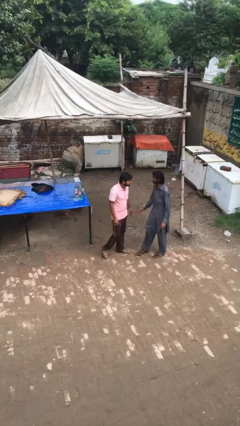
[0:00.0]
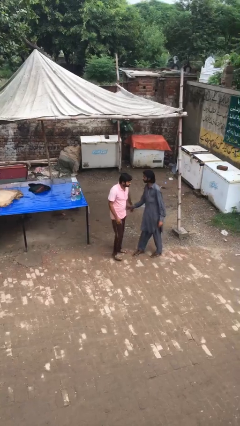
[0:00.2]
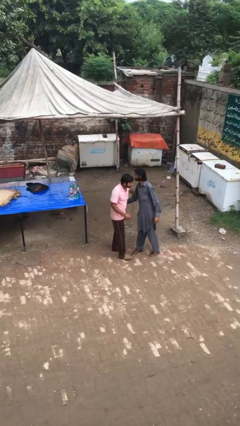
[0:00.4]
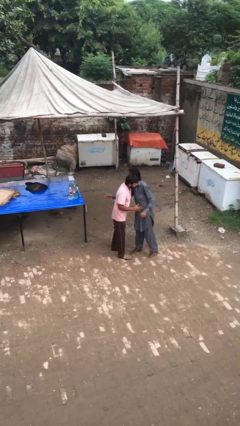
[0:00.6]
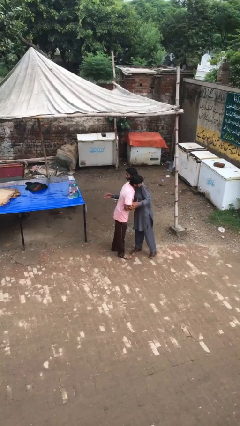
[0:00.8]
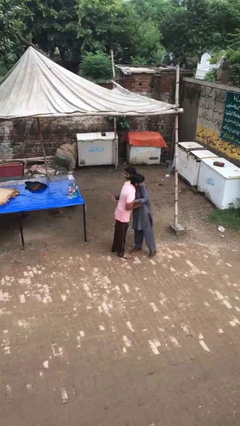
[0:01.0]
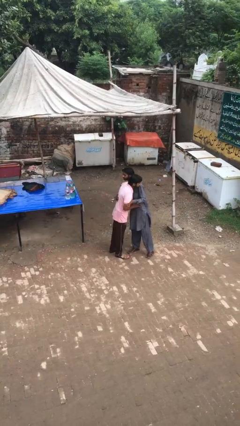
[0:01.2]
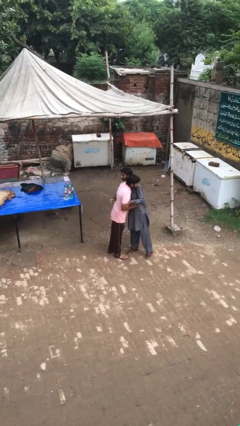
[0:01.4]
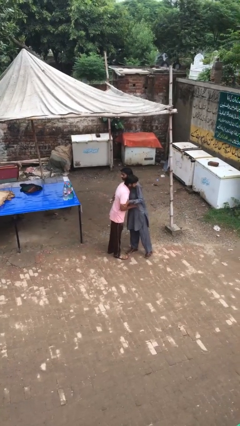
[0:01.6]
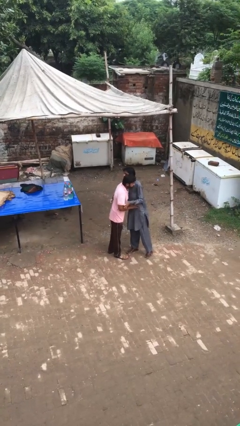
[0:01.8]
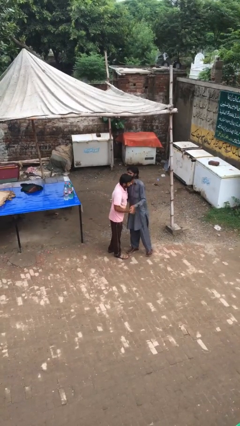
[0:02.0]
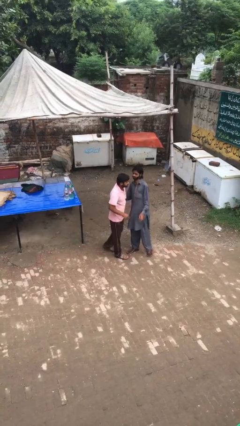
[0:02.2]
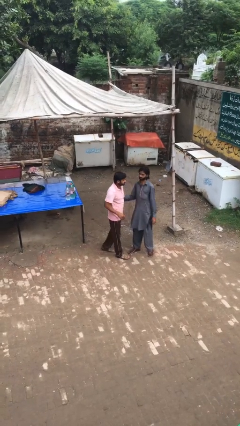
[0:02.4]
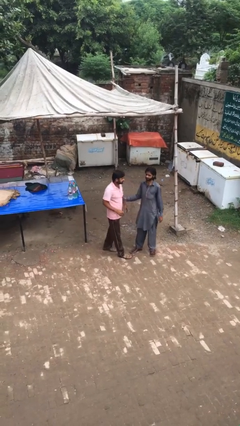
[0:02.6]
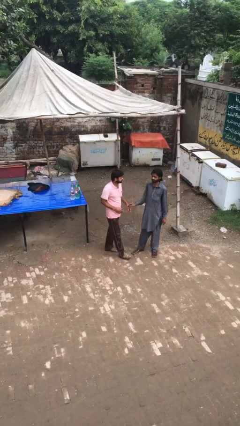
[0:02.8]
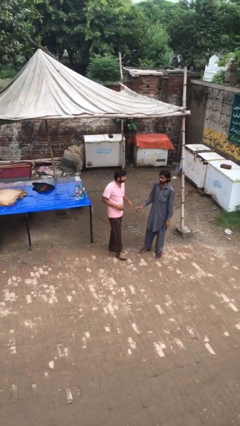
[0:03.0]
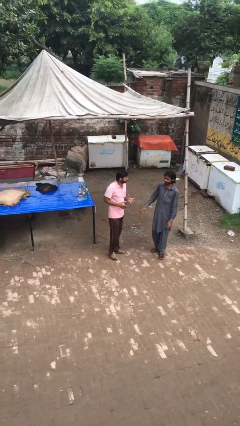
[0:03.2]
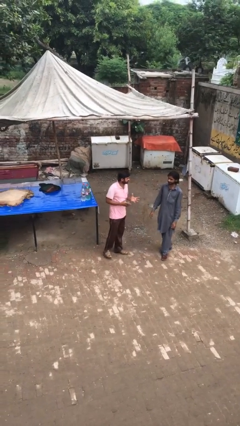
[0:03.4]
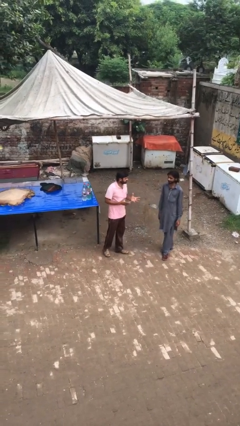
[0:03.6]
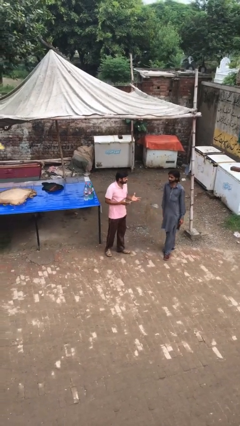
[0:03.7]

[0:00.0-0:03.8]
person embraces person

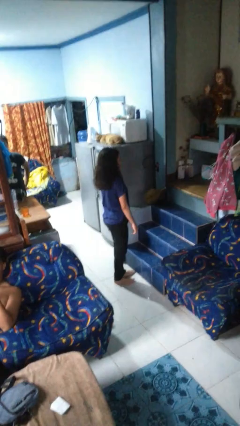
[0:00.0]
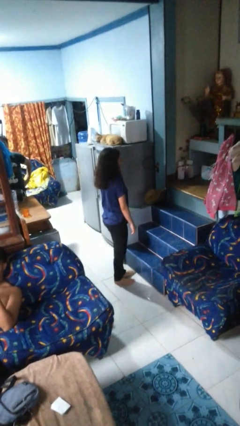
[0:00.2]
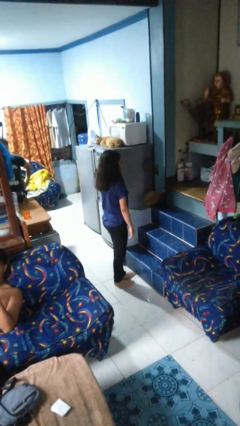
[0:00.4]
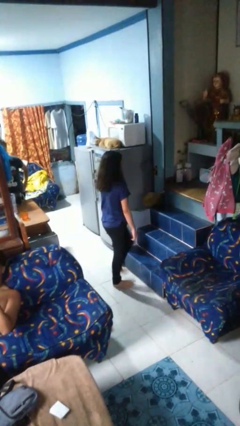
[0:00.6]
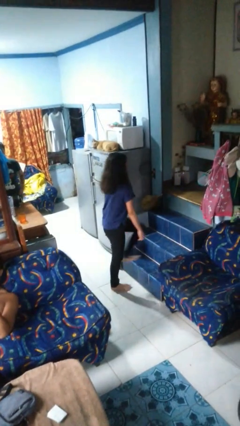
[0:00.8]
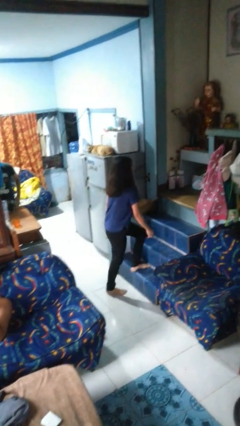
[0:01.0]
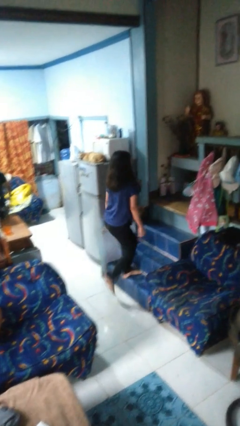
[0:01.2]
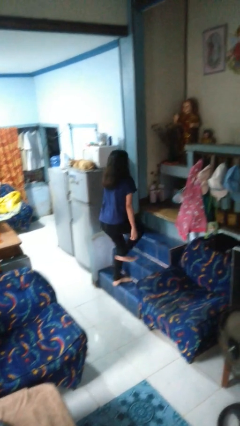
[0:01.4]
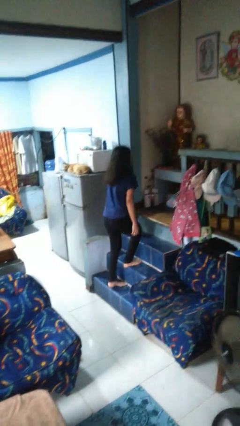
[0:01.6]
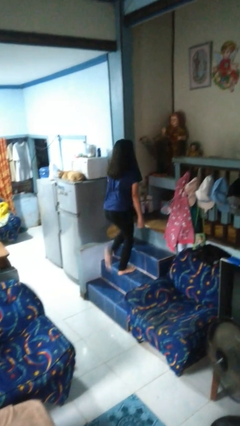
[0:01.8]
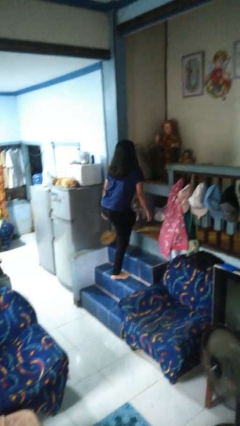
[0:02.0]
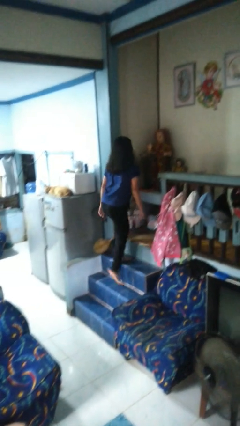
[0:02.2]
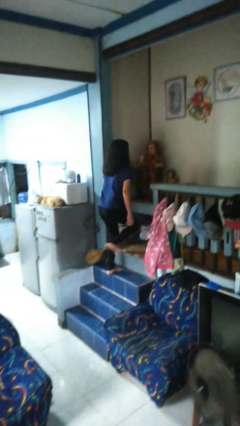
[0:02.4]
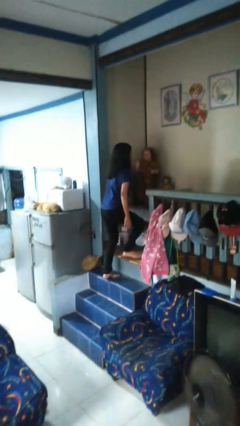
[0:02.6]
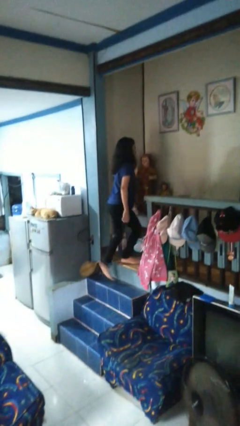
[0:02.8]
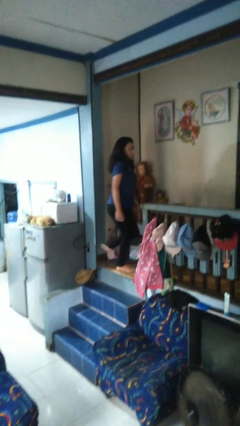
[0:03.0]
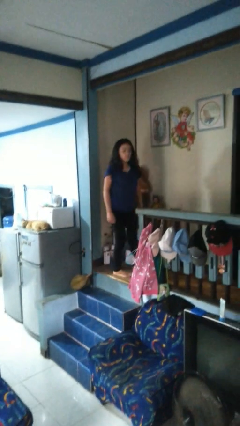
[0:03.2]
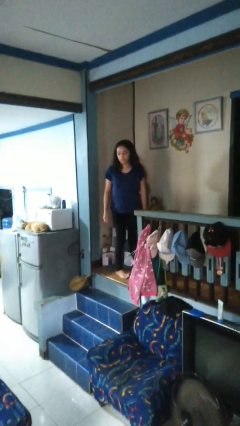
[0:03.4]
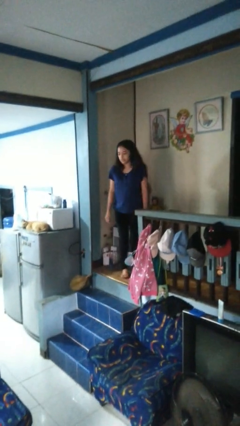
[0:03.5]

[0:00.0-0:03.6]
person climbs up stairs

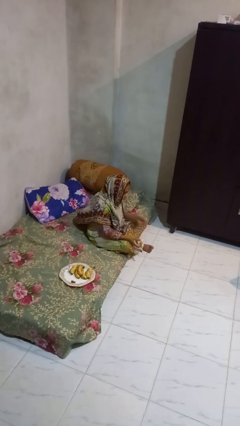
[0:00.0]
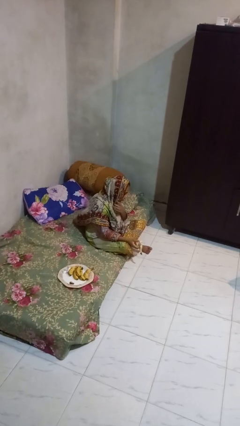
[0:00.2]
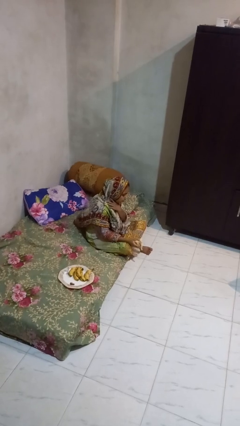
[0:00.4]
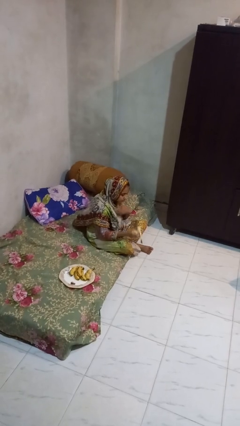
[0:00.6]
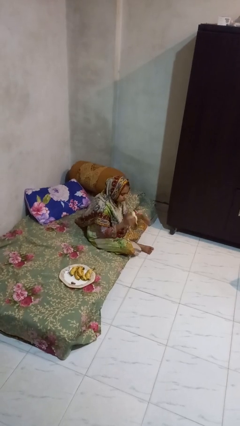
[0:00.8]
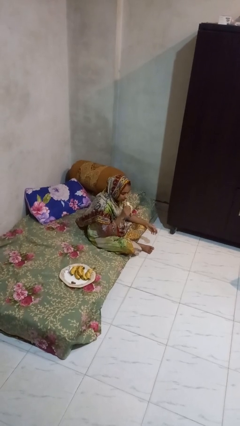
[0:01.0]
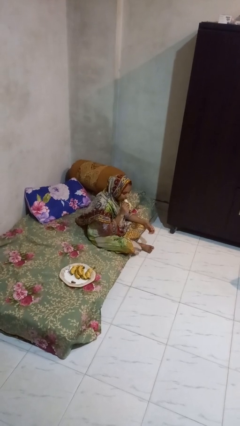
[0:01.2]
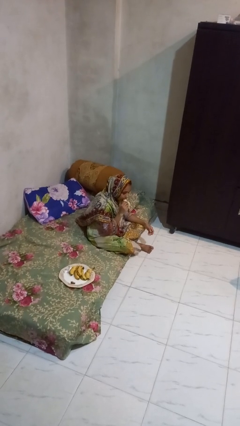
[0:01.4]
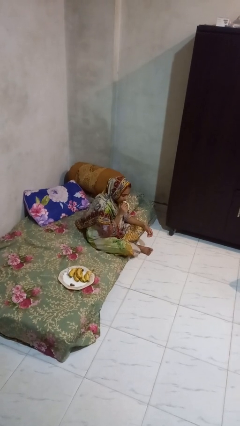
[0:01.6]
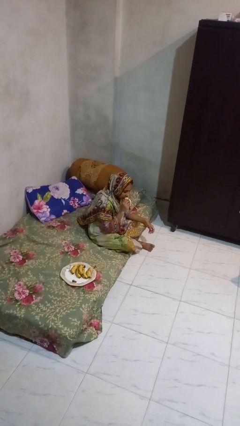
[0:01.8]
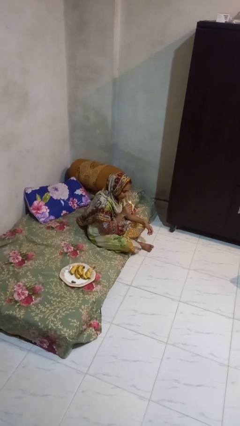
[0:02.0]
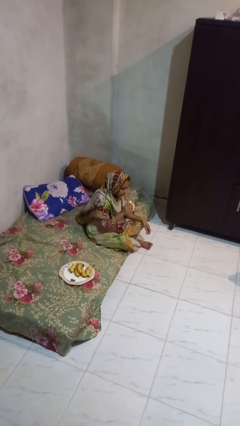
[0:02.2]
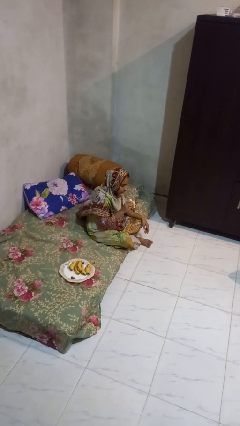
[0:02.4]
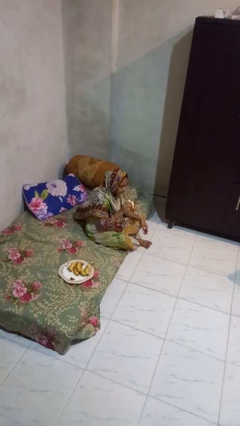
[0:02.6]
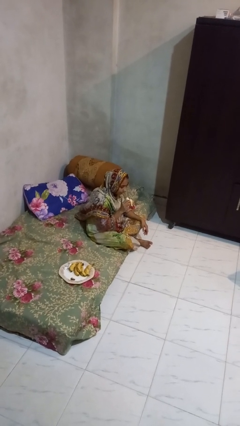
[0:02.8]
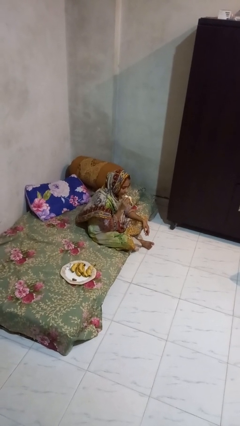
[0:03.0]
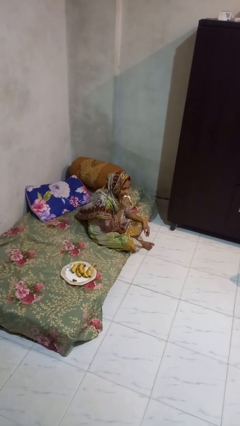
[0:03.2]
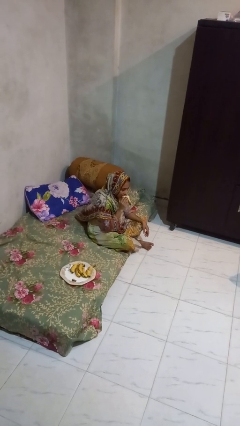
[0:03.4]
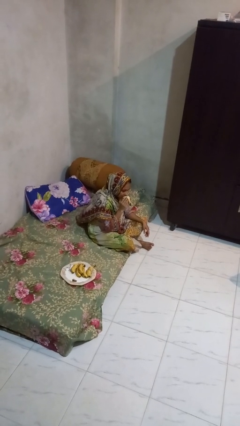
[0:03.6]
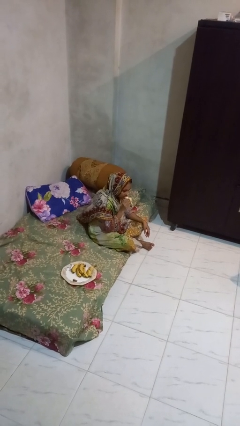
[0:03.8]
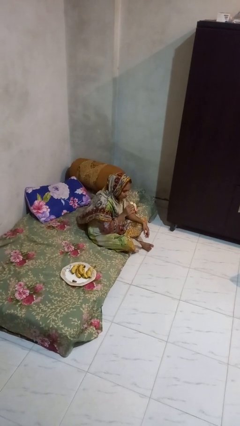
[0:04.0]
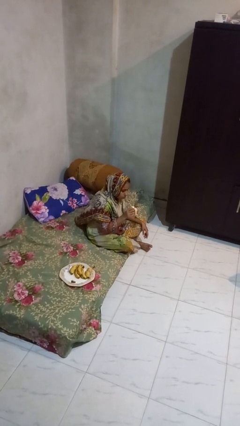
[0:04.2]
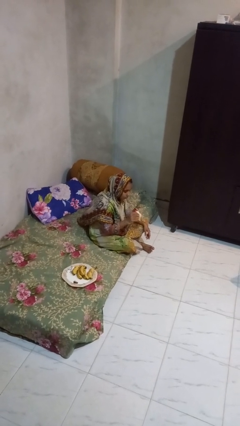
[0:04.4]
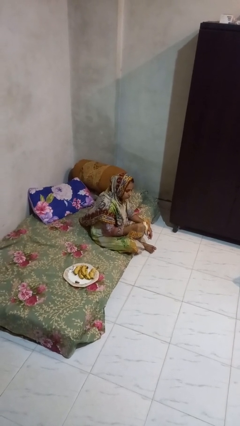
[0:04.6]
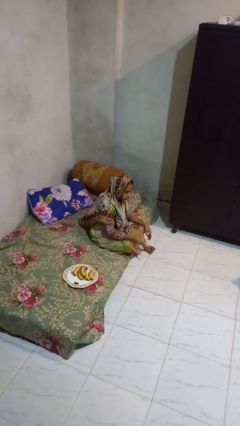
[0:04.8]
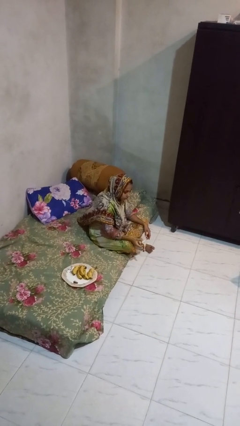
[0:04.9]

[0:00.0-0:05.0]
person eats banana

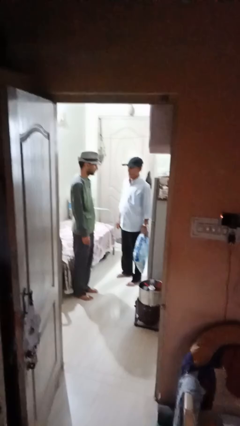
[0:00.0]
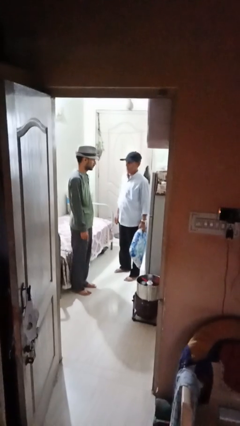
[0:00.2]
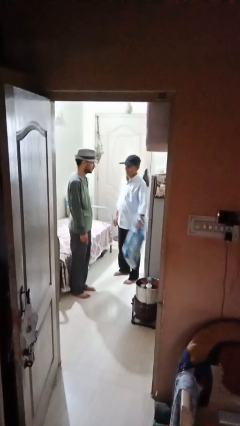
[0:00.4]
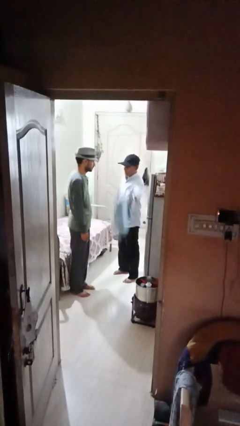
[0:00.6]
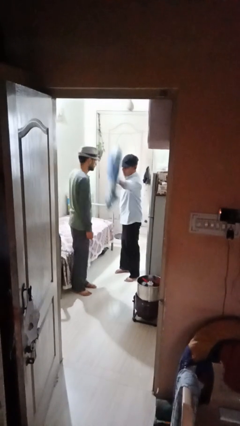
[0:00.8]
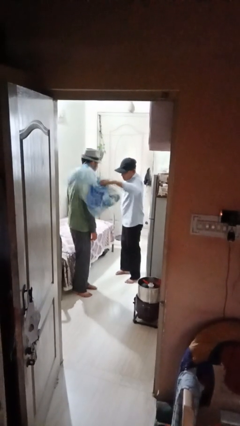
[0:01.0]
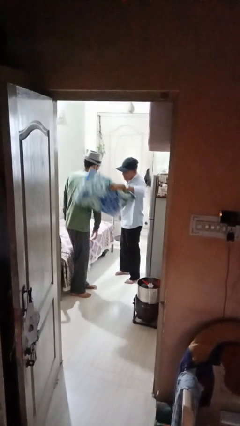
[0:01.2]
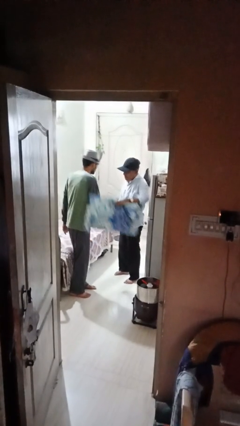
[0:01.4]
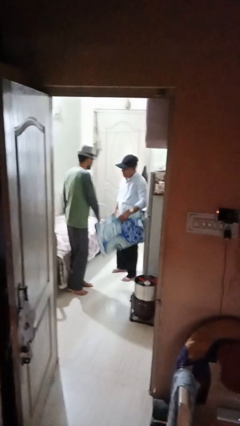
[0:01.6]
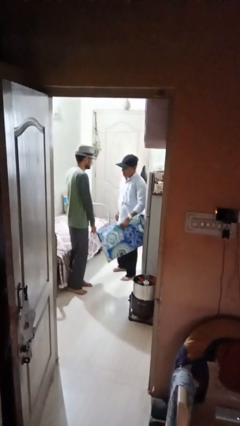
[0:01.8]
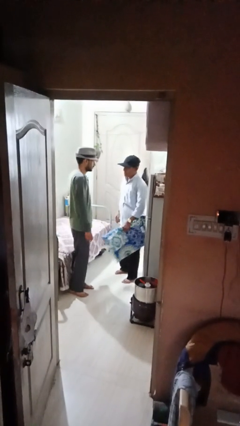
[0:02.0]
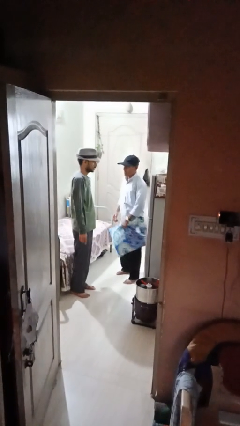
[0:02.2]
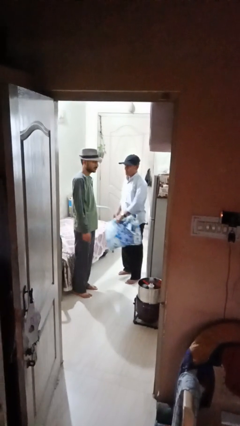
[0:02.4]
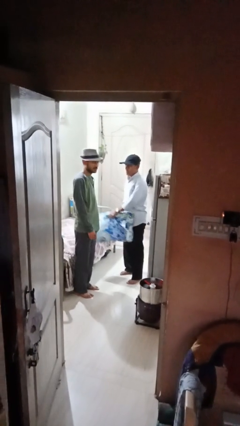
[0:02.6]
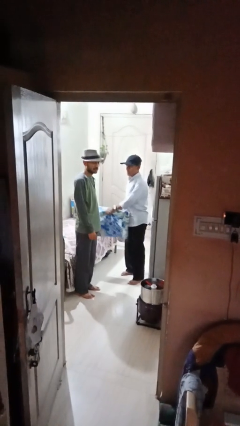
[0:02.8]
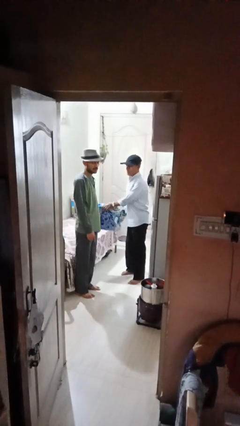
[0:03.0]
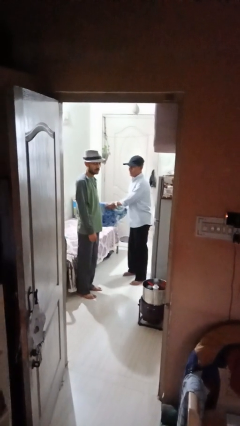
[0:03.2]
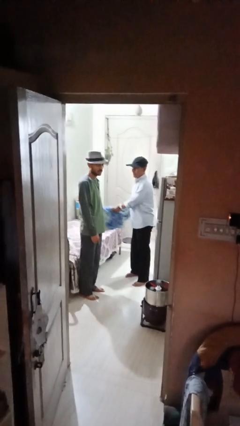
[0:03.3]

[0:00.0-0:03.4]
person hits person with pillow

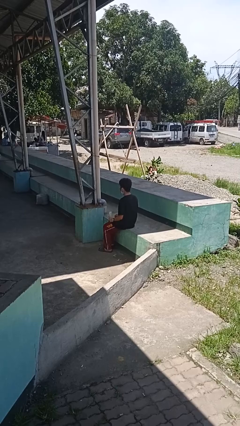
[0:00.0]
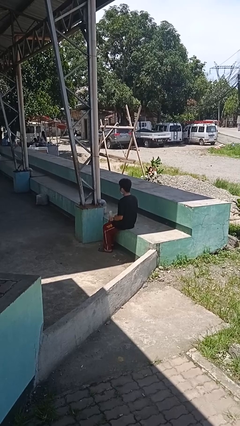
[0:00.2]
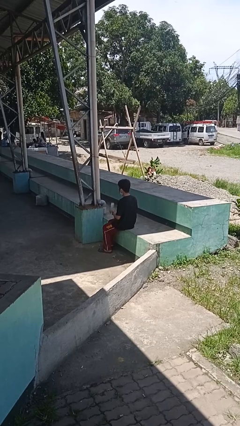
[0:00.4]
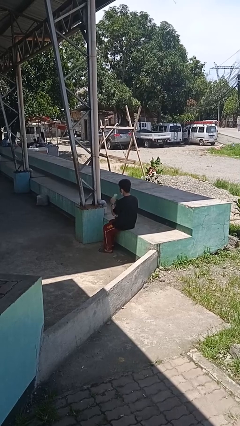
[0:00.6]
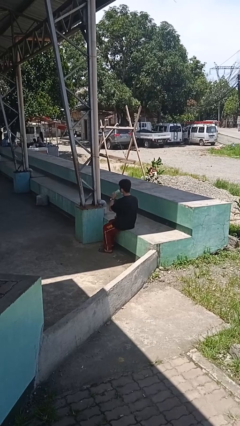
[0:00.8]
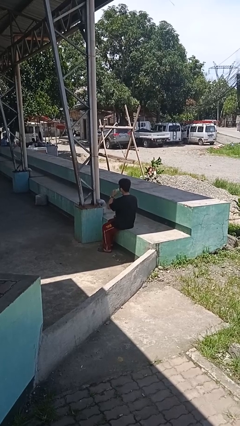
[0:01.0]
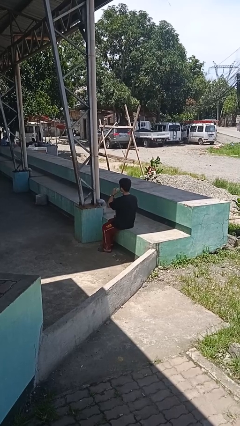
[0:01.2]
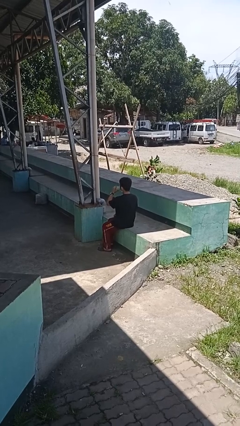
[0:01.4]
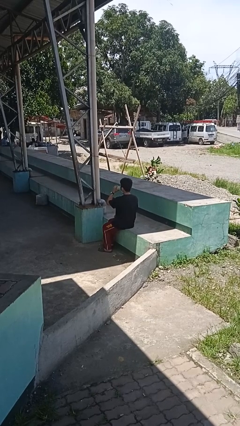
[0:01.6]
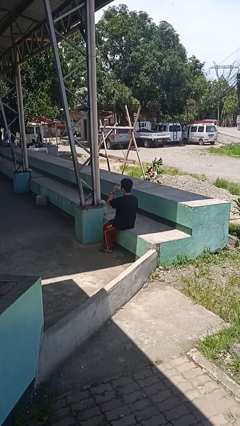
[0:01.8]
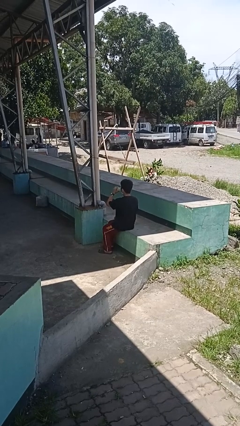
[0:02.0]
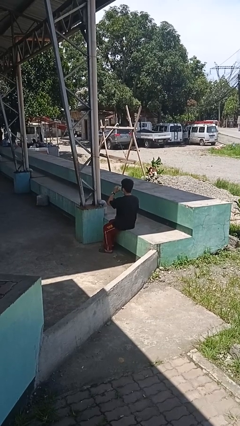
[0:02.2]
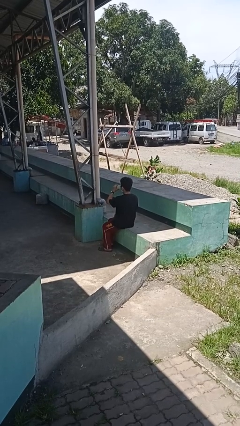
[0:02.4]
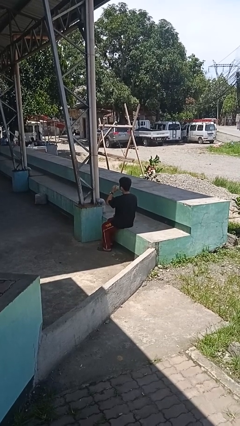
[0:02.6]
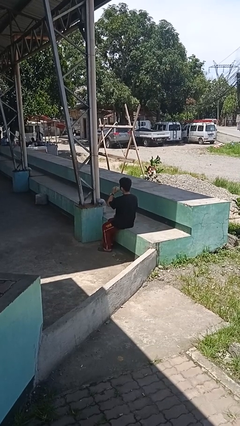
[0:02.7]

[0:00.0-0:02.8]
person drinks from bottle
